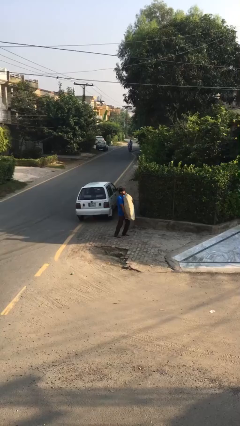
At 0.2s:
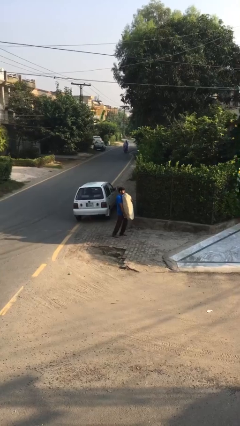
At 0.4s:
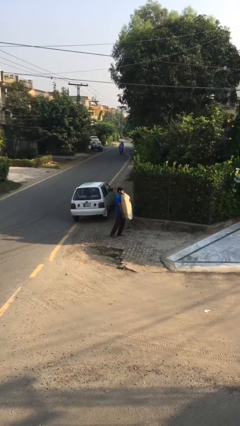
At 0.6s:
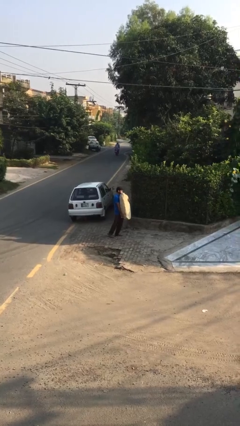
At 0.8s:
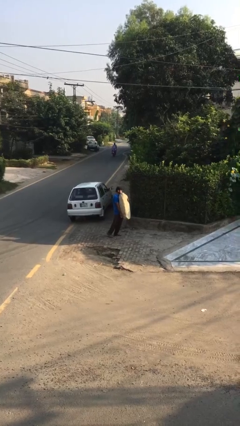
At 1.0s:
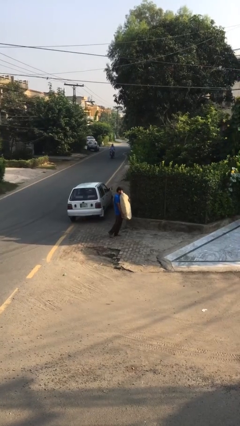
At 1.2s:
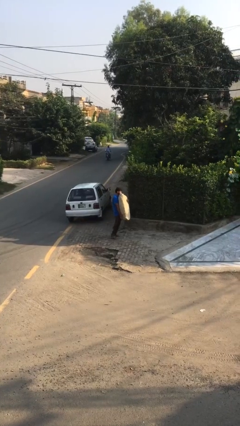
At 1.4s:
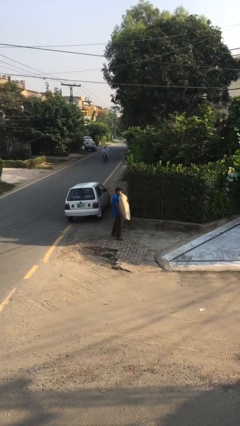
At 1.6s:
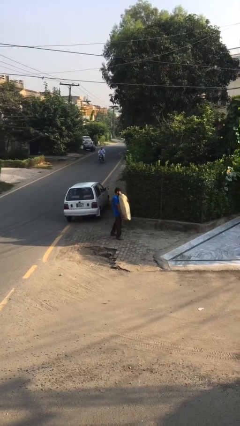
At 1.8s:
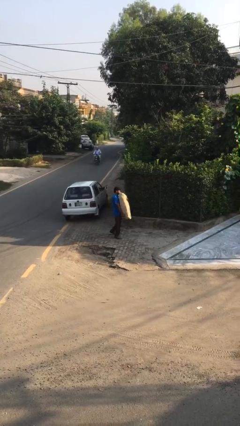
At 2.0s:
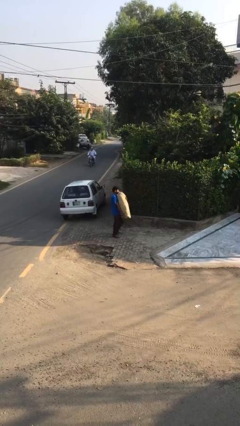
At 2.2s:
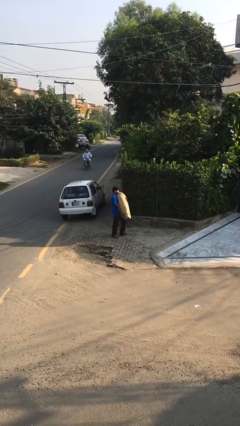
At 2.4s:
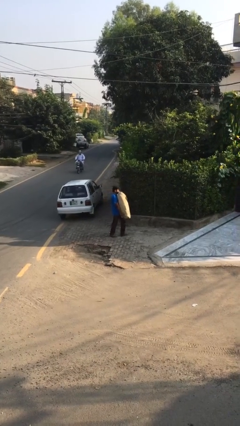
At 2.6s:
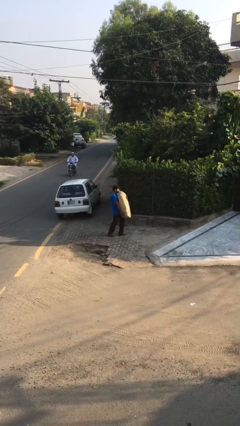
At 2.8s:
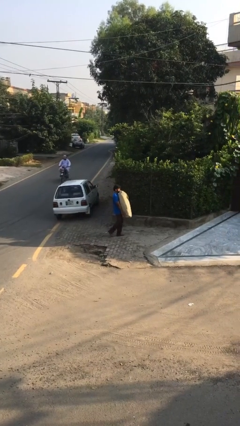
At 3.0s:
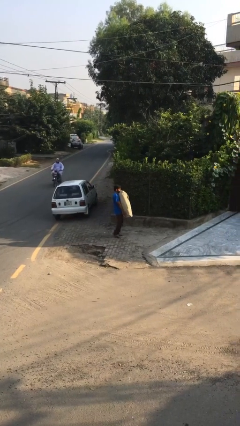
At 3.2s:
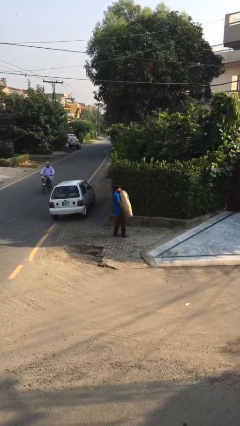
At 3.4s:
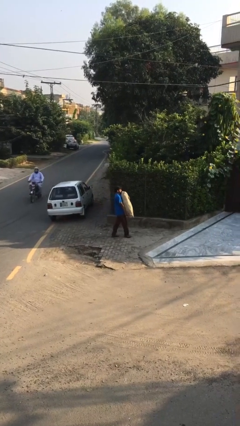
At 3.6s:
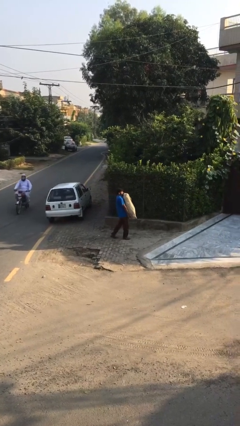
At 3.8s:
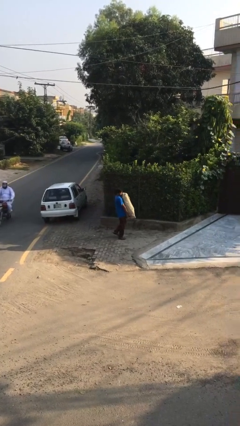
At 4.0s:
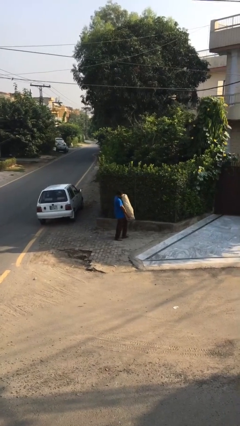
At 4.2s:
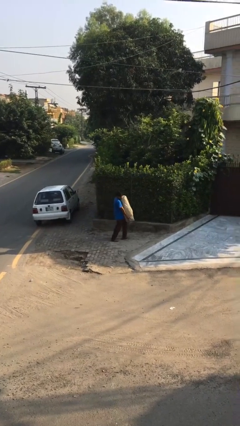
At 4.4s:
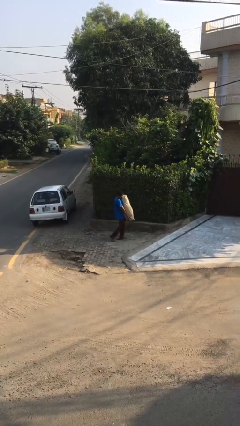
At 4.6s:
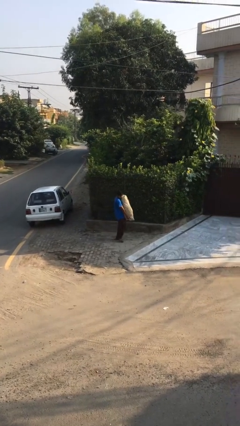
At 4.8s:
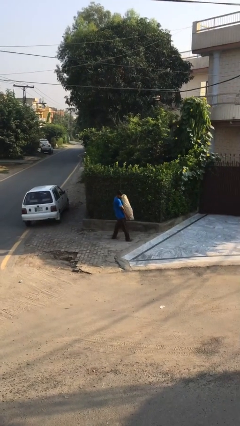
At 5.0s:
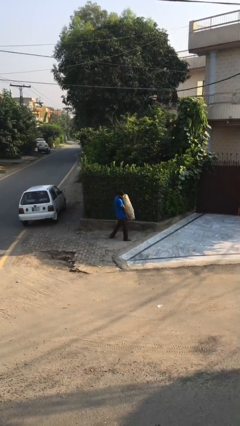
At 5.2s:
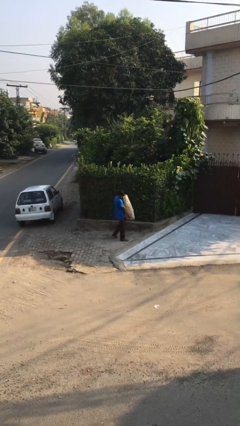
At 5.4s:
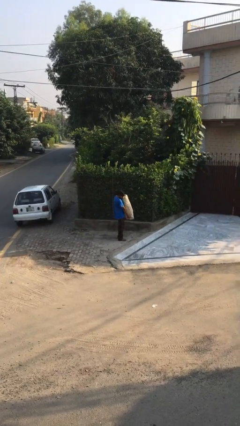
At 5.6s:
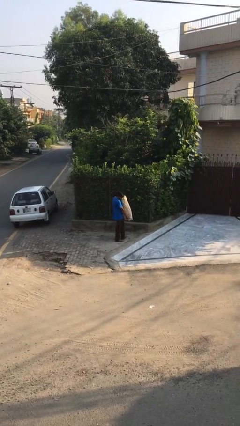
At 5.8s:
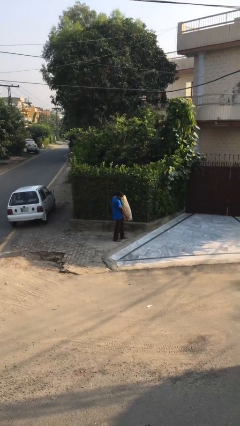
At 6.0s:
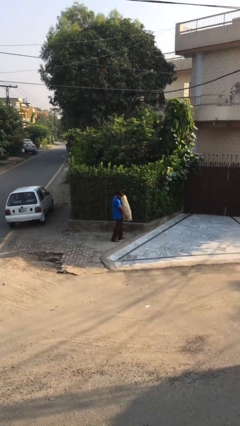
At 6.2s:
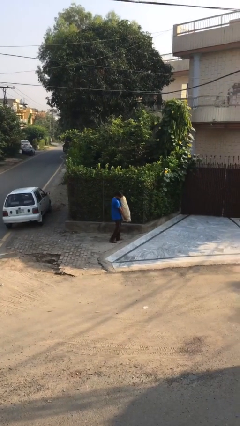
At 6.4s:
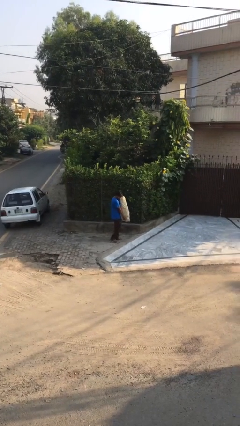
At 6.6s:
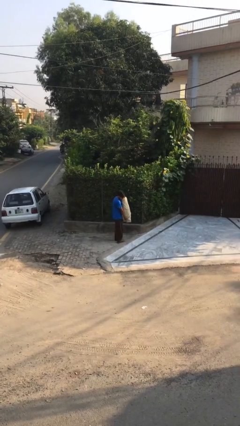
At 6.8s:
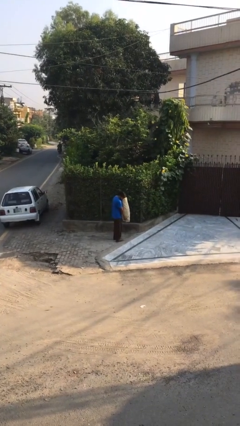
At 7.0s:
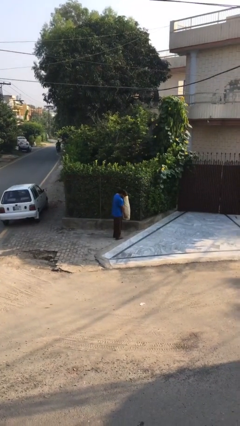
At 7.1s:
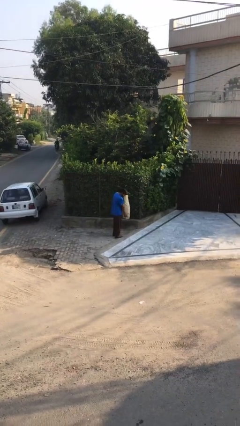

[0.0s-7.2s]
person carries heavy object

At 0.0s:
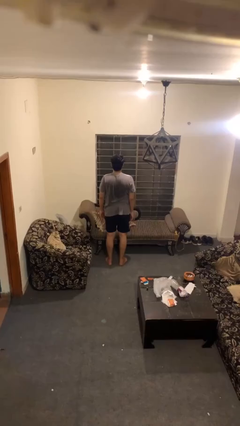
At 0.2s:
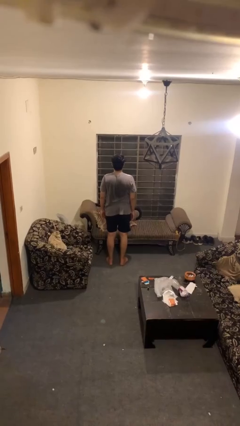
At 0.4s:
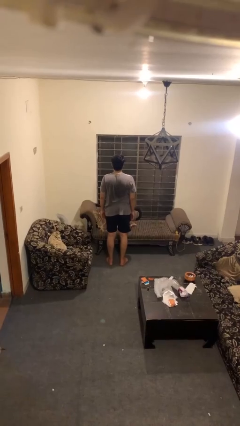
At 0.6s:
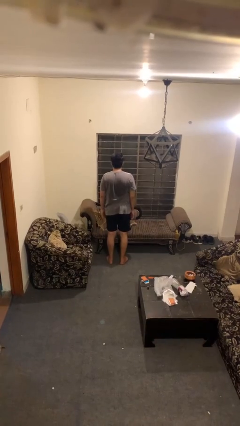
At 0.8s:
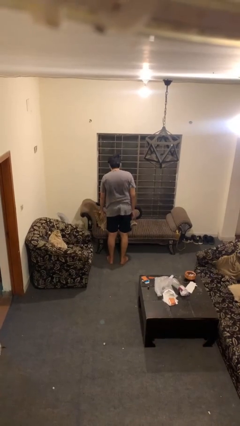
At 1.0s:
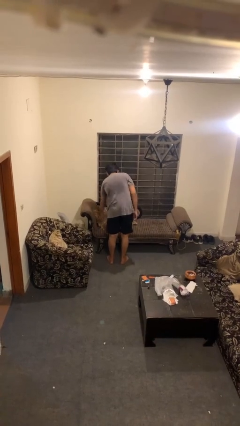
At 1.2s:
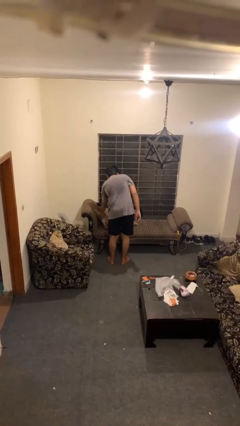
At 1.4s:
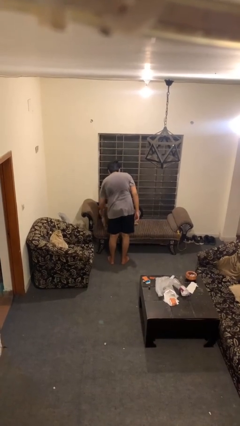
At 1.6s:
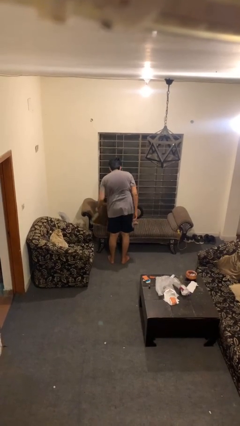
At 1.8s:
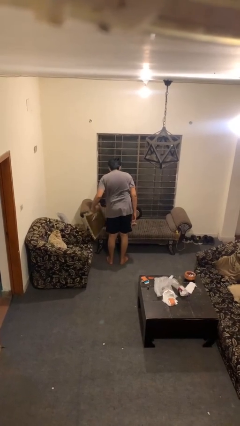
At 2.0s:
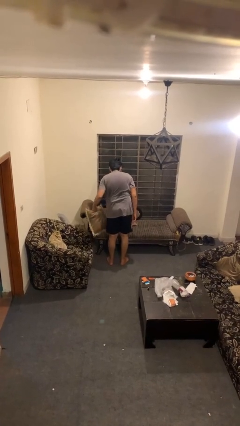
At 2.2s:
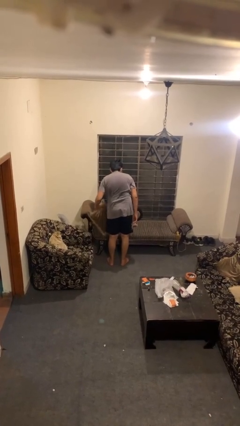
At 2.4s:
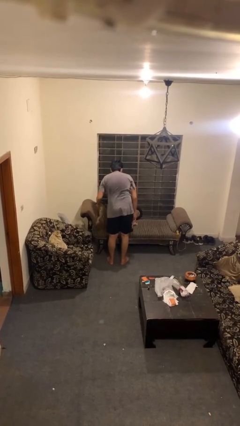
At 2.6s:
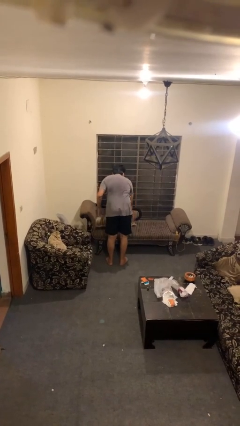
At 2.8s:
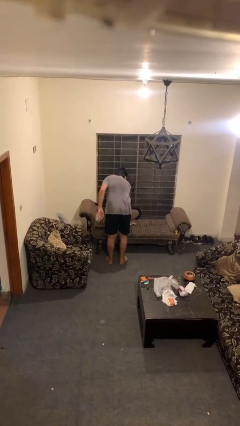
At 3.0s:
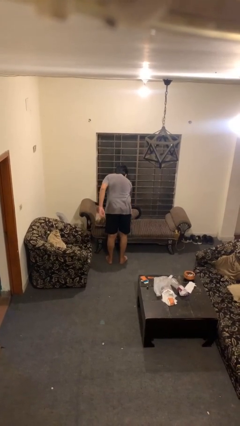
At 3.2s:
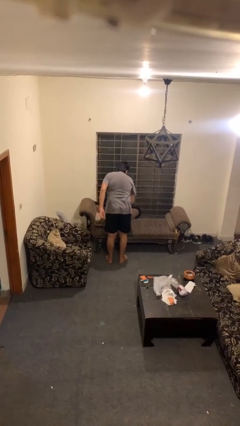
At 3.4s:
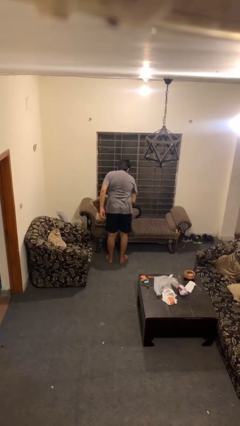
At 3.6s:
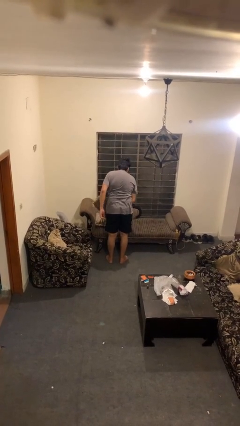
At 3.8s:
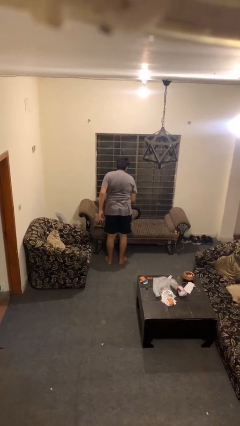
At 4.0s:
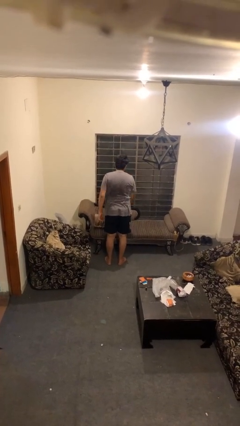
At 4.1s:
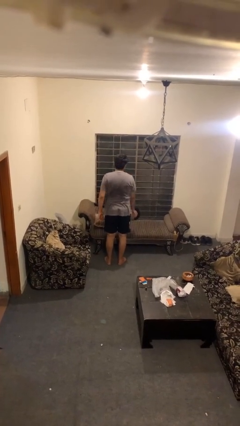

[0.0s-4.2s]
person searches in couch

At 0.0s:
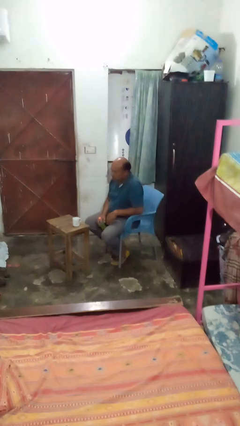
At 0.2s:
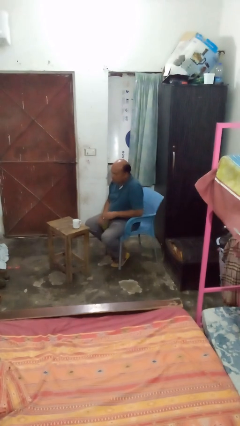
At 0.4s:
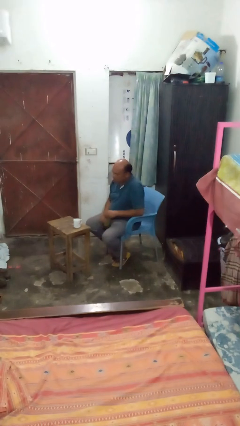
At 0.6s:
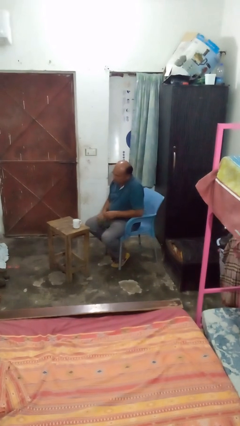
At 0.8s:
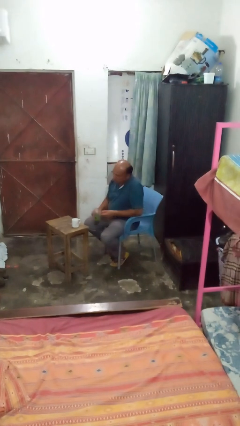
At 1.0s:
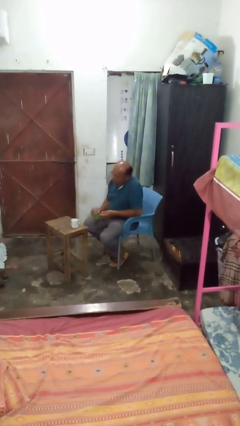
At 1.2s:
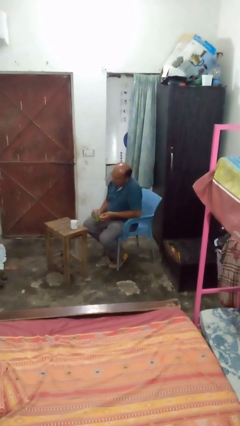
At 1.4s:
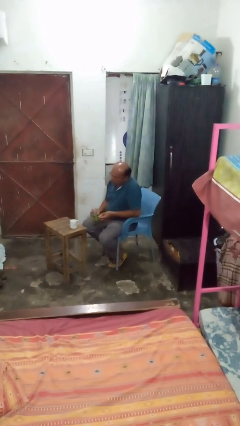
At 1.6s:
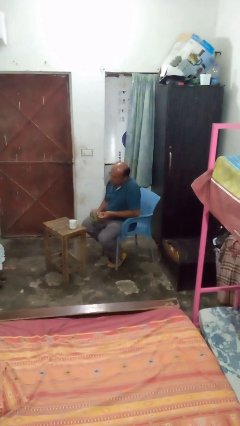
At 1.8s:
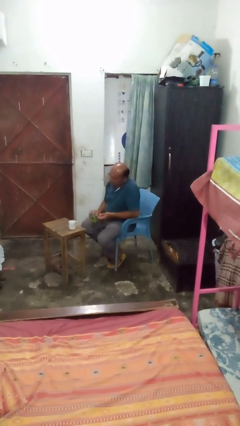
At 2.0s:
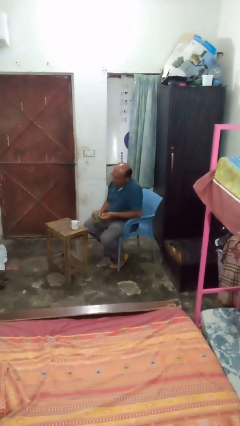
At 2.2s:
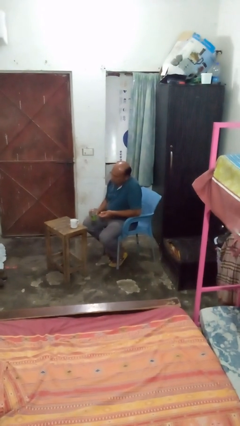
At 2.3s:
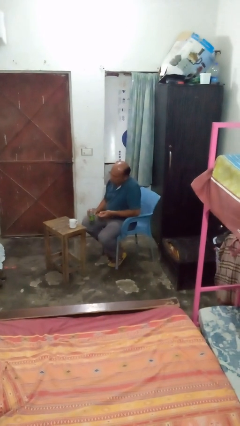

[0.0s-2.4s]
person unscrews lid from bottle

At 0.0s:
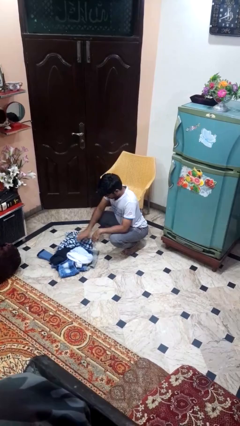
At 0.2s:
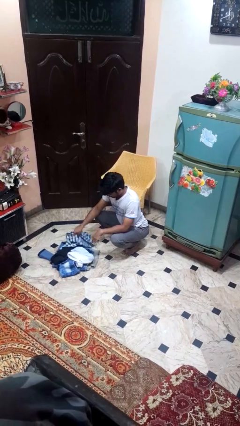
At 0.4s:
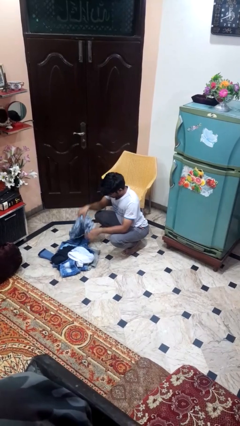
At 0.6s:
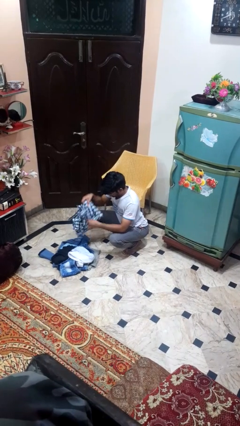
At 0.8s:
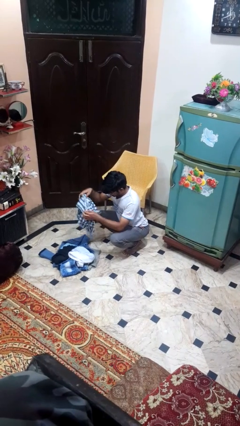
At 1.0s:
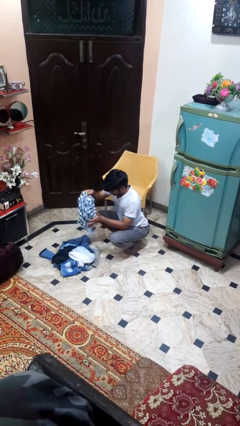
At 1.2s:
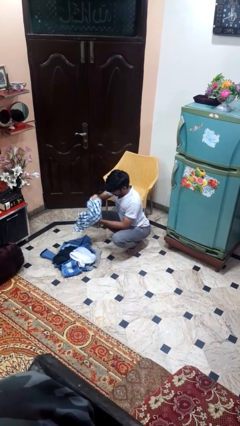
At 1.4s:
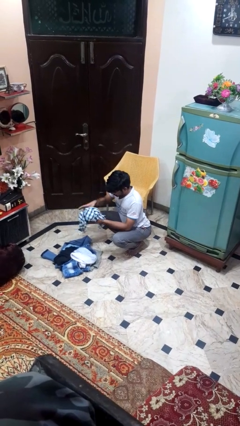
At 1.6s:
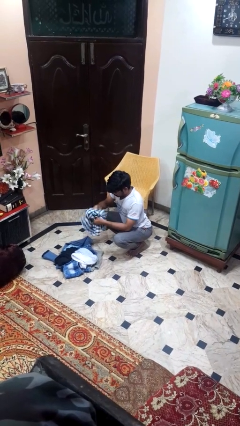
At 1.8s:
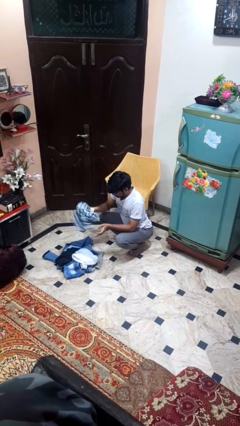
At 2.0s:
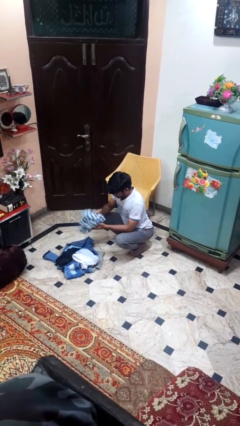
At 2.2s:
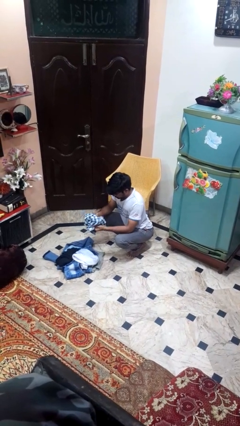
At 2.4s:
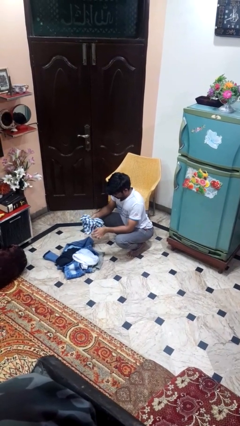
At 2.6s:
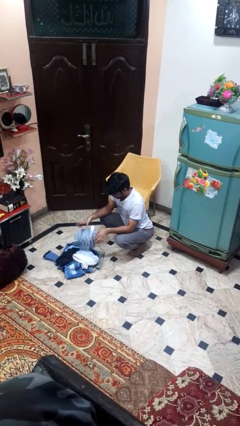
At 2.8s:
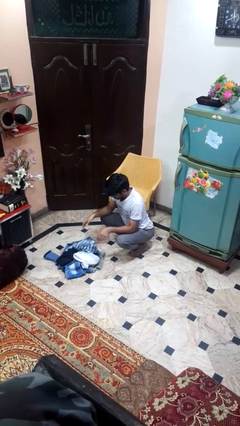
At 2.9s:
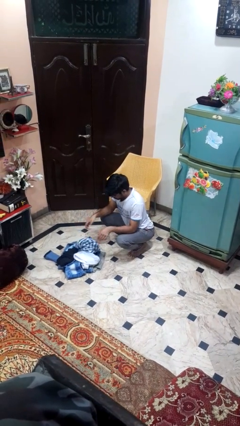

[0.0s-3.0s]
person folds pants

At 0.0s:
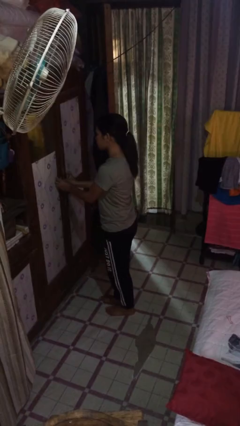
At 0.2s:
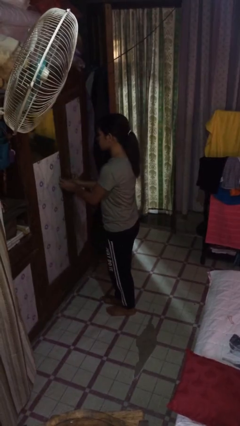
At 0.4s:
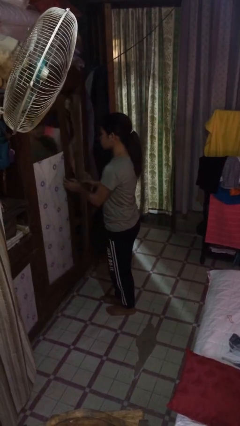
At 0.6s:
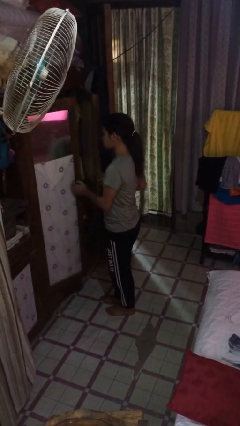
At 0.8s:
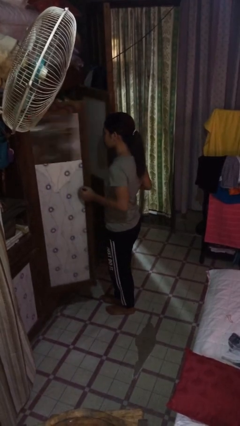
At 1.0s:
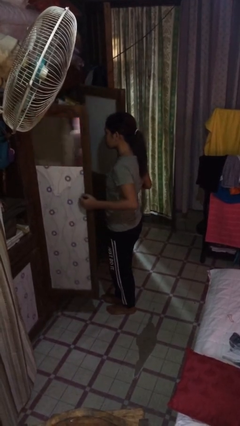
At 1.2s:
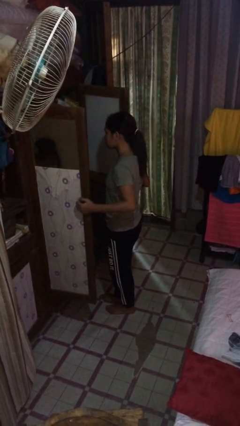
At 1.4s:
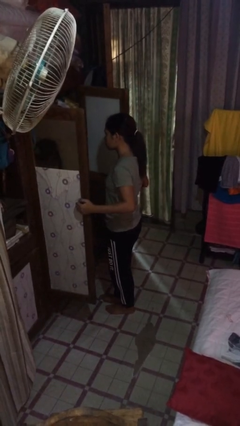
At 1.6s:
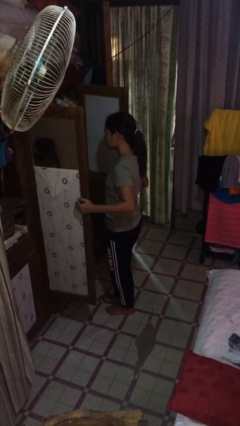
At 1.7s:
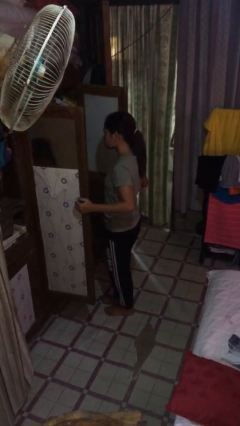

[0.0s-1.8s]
person opens closet door
